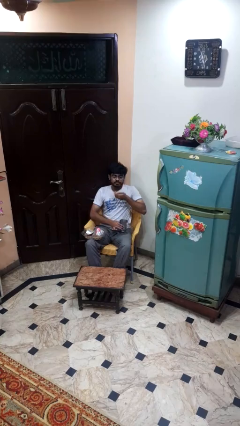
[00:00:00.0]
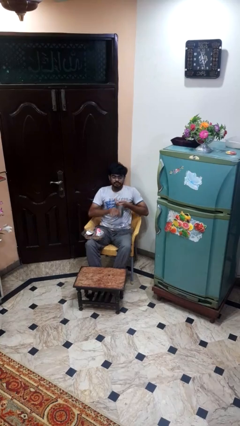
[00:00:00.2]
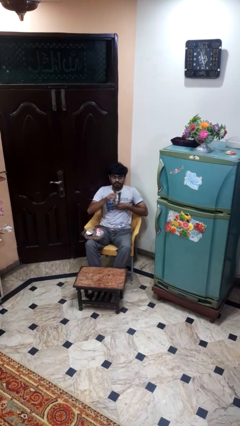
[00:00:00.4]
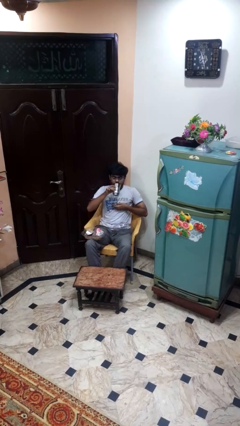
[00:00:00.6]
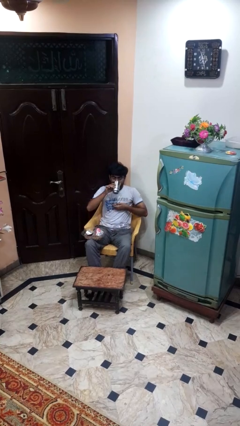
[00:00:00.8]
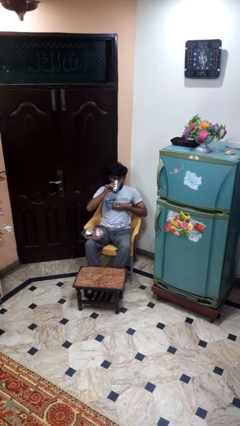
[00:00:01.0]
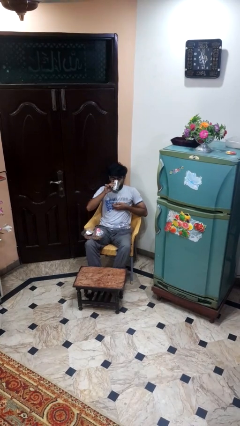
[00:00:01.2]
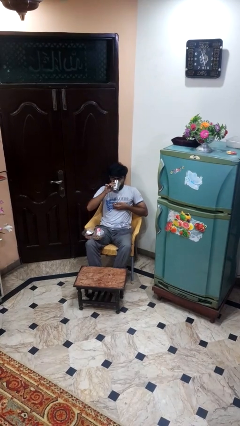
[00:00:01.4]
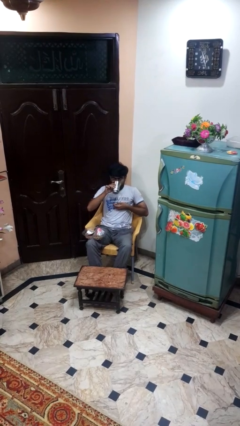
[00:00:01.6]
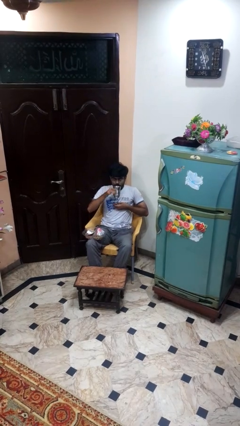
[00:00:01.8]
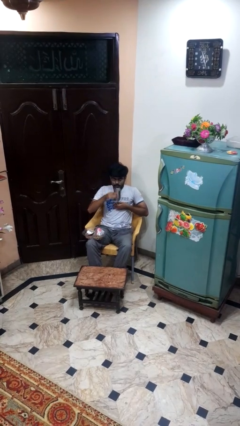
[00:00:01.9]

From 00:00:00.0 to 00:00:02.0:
person drinks from cup

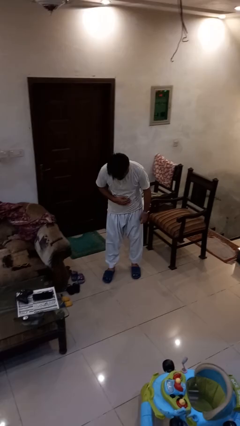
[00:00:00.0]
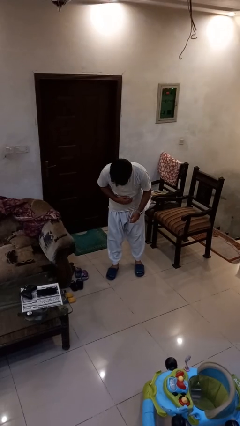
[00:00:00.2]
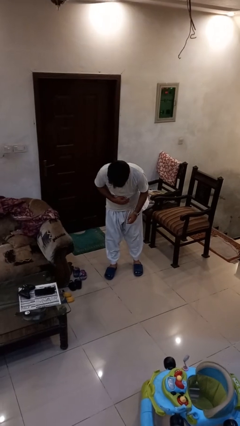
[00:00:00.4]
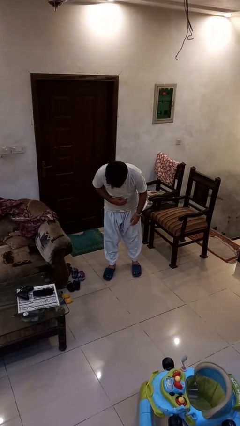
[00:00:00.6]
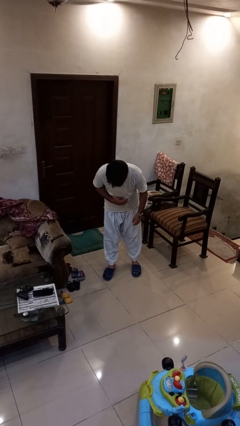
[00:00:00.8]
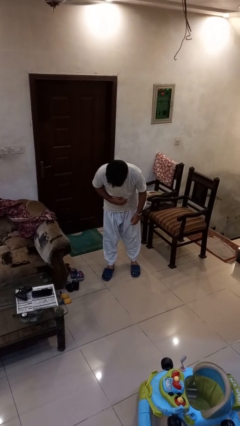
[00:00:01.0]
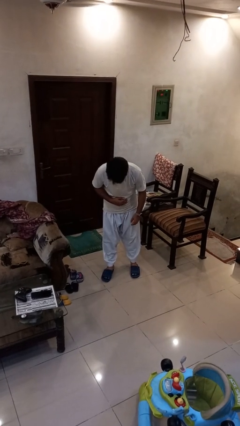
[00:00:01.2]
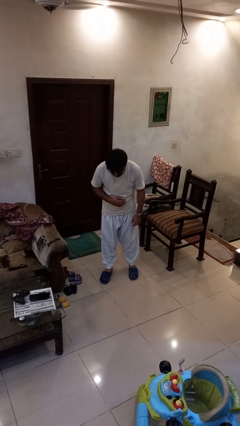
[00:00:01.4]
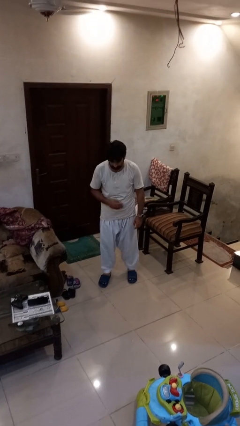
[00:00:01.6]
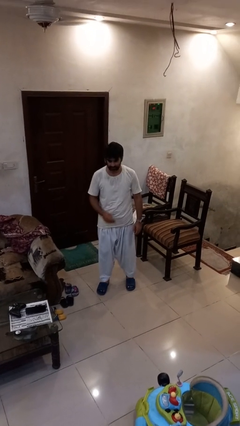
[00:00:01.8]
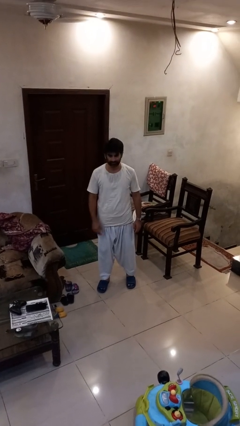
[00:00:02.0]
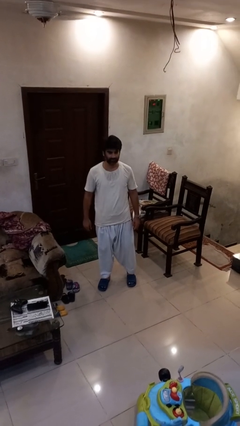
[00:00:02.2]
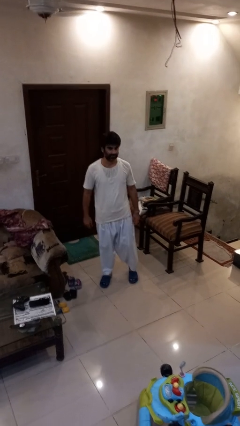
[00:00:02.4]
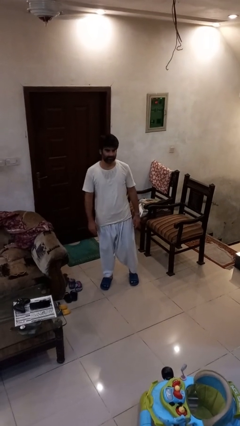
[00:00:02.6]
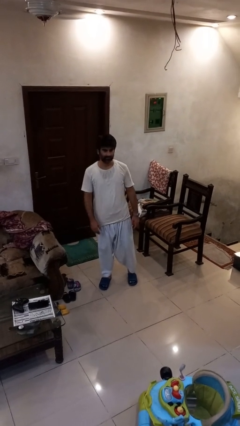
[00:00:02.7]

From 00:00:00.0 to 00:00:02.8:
person bows

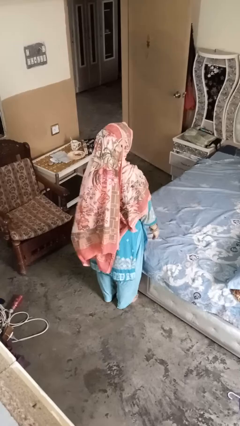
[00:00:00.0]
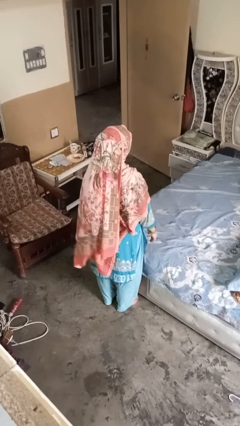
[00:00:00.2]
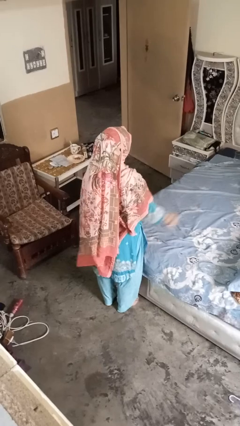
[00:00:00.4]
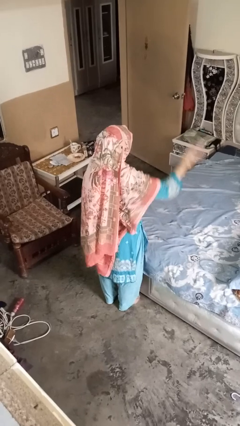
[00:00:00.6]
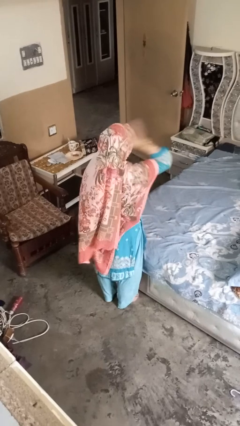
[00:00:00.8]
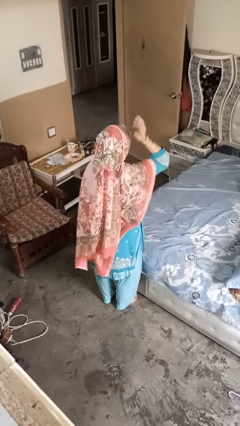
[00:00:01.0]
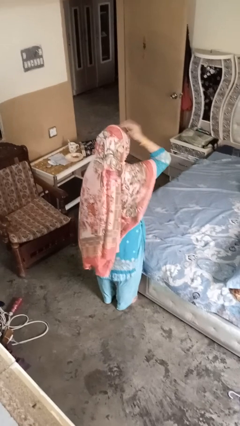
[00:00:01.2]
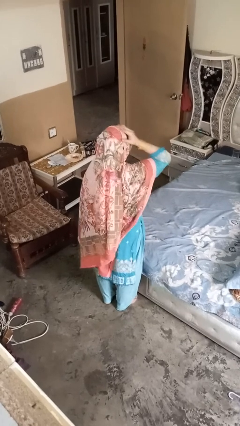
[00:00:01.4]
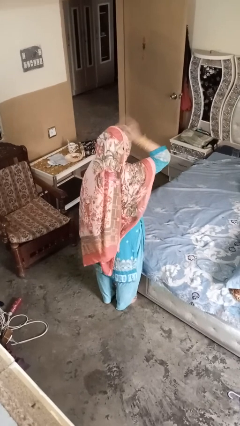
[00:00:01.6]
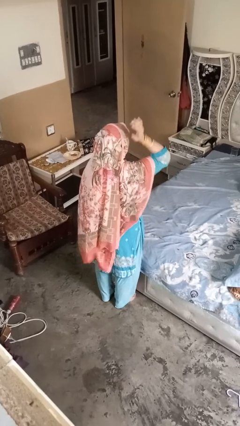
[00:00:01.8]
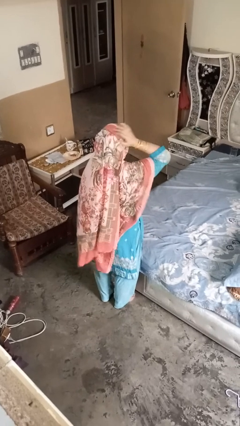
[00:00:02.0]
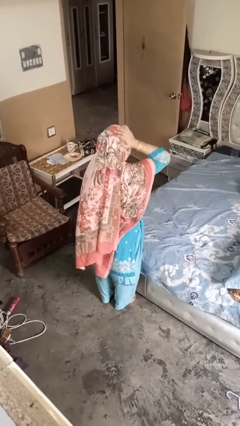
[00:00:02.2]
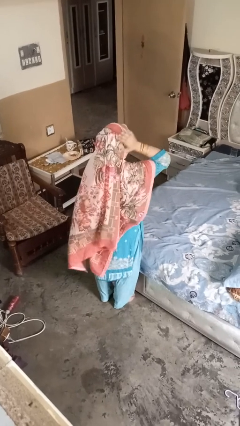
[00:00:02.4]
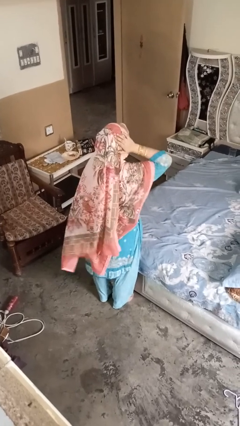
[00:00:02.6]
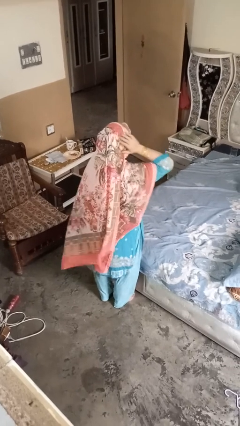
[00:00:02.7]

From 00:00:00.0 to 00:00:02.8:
person pats head

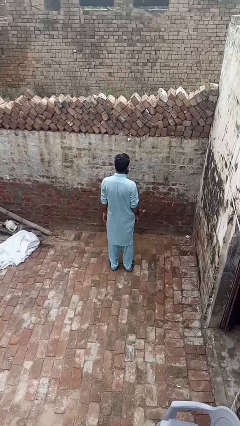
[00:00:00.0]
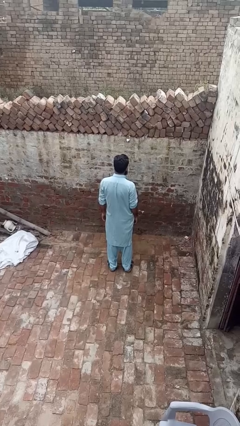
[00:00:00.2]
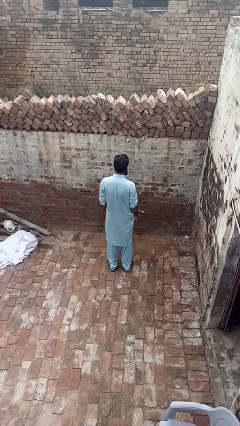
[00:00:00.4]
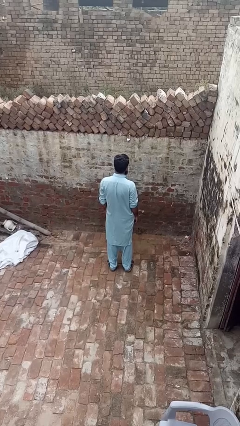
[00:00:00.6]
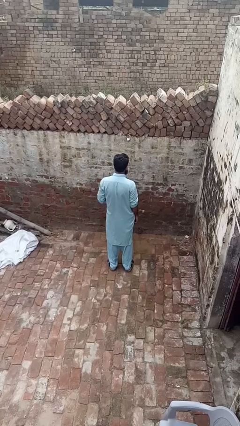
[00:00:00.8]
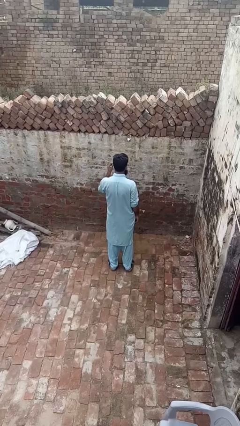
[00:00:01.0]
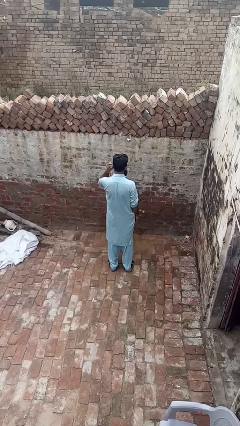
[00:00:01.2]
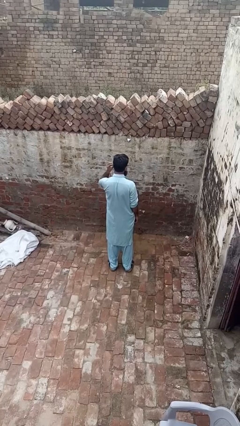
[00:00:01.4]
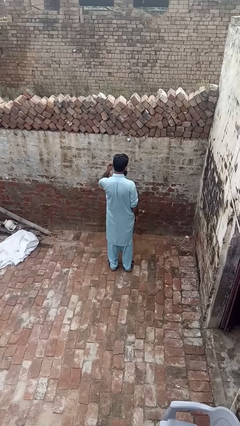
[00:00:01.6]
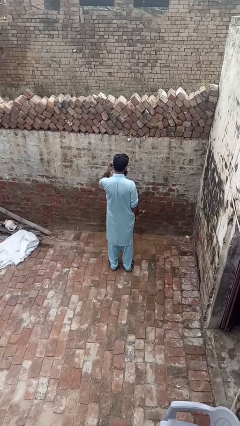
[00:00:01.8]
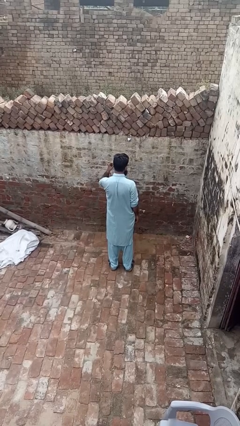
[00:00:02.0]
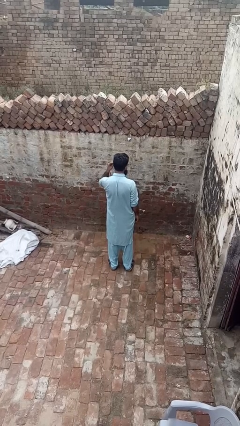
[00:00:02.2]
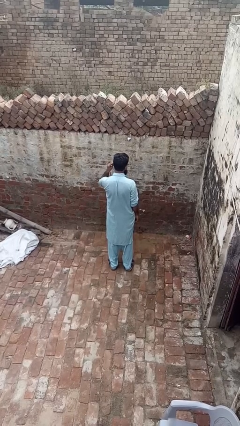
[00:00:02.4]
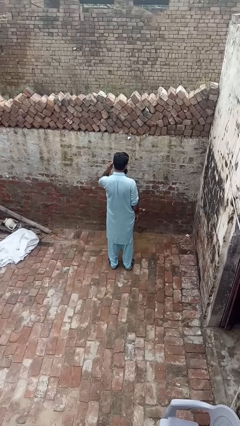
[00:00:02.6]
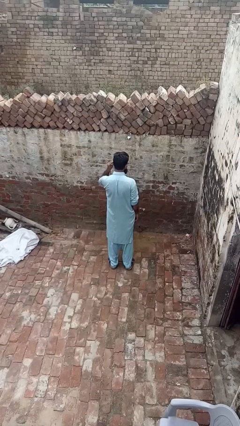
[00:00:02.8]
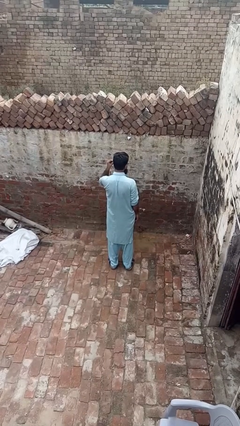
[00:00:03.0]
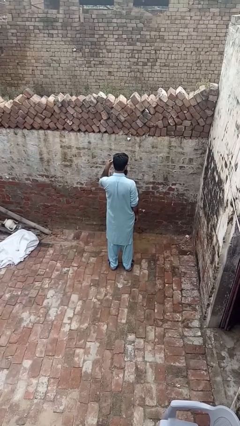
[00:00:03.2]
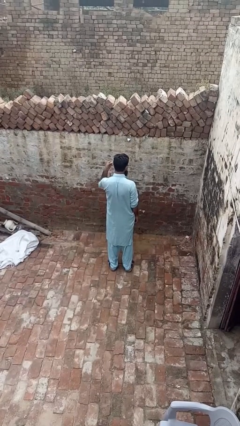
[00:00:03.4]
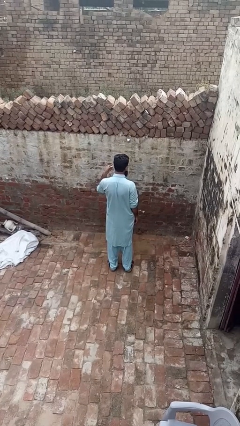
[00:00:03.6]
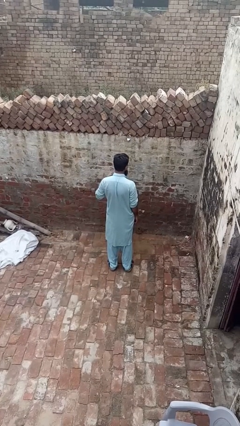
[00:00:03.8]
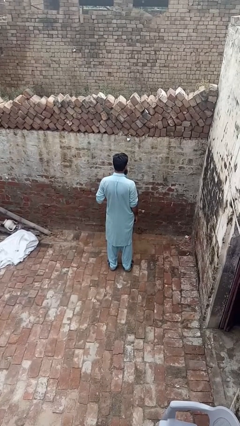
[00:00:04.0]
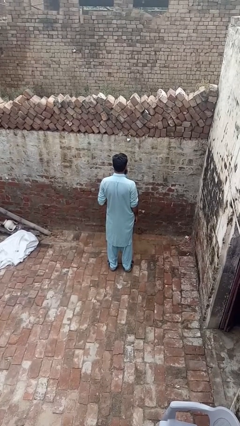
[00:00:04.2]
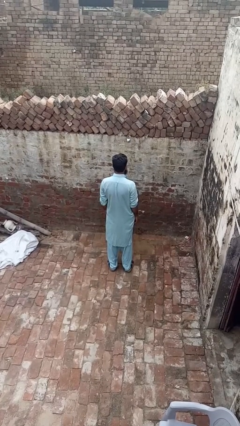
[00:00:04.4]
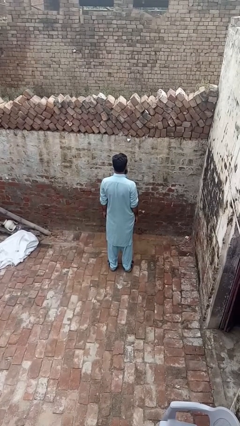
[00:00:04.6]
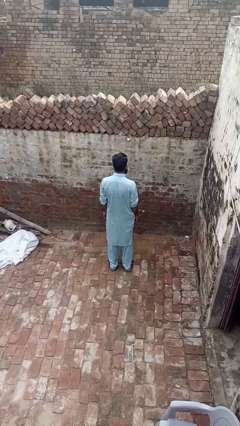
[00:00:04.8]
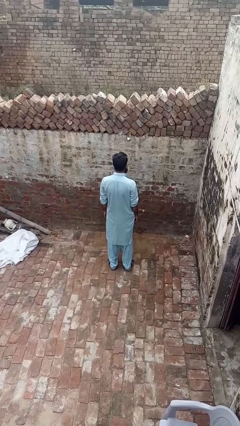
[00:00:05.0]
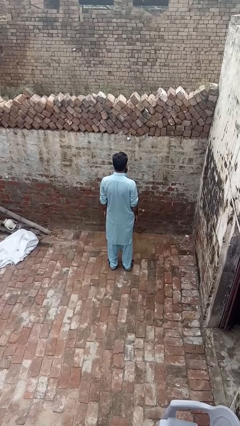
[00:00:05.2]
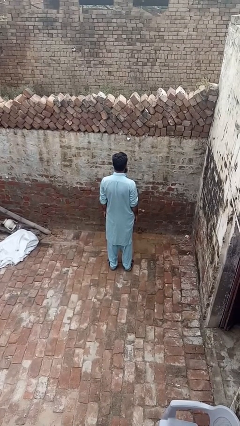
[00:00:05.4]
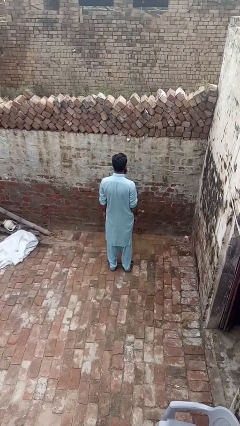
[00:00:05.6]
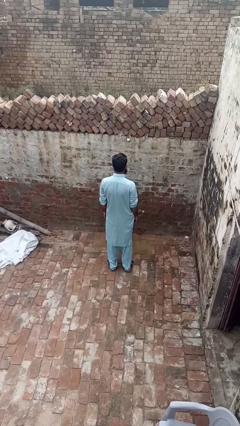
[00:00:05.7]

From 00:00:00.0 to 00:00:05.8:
person takes off earrings

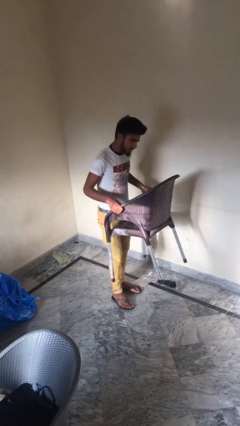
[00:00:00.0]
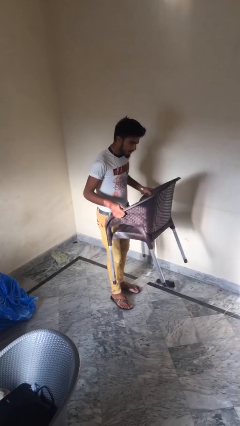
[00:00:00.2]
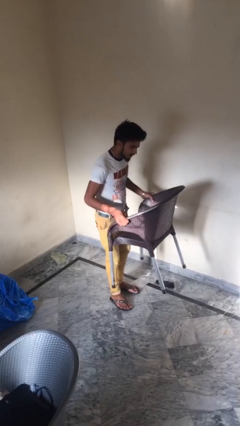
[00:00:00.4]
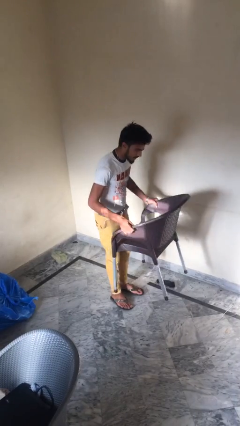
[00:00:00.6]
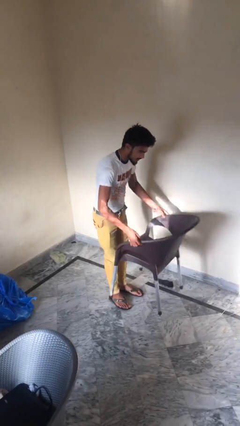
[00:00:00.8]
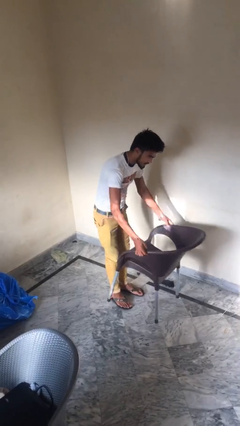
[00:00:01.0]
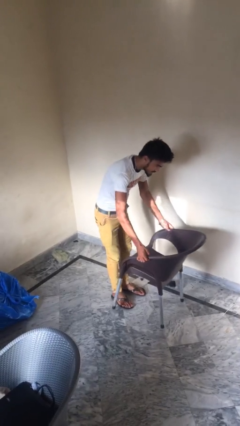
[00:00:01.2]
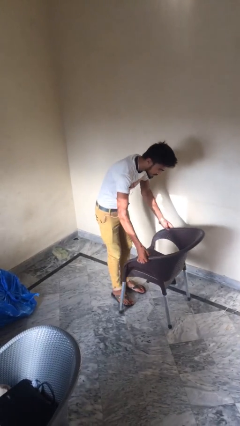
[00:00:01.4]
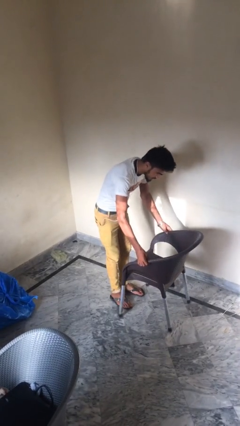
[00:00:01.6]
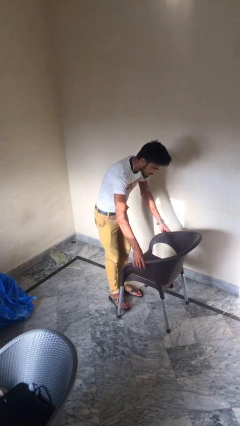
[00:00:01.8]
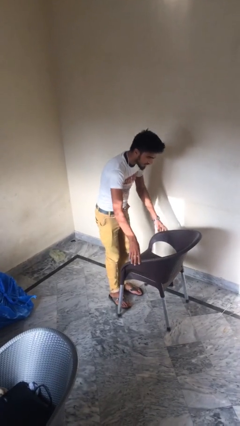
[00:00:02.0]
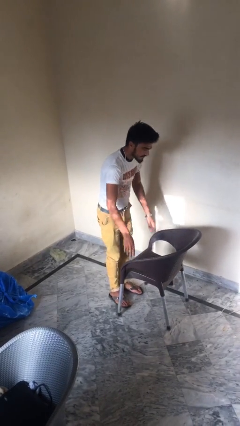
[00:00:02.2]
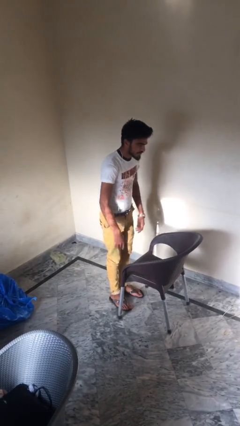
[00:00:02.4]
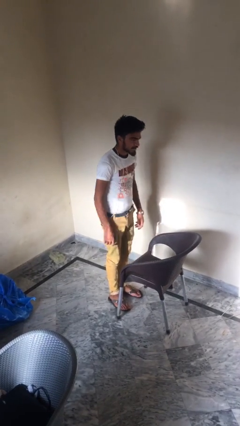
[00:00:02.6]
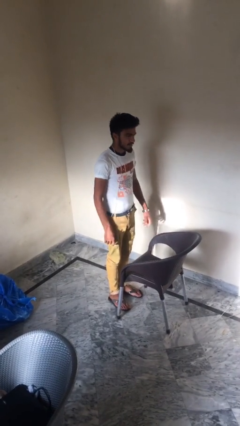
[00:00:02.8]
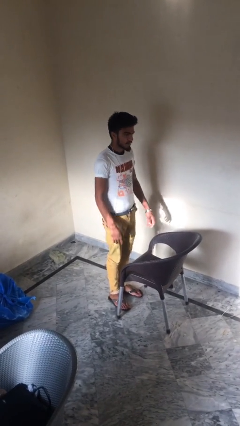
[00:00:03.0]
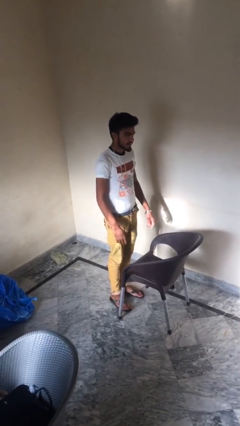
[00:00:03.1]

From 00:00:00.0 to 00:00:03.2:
person puts down object on floor

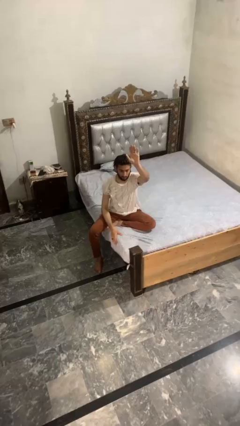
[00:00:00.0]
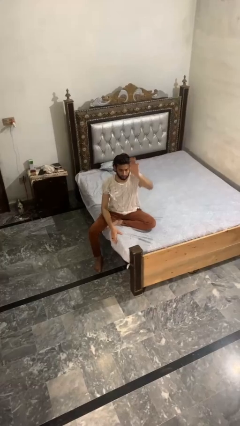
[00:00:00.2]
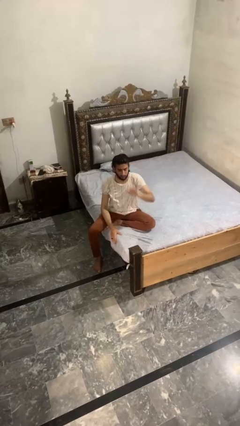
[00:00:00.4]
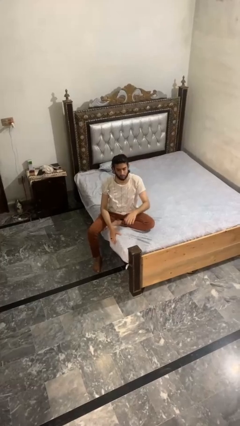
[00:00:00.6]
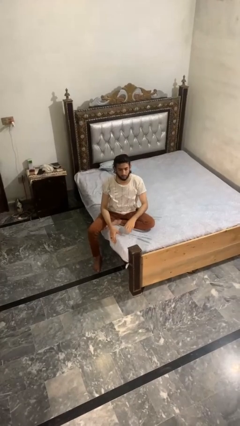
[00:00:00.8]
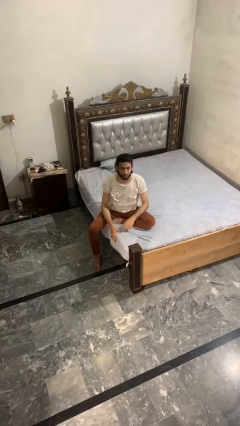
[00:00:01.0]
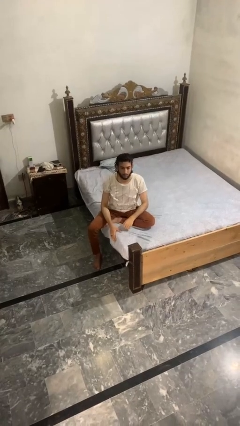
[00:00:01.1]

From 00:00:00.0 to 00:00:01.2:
person gestures lower hand
